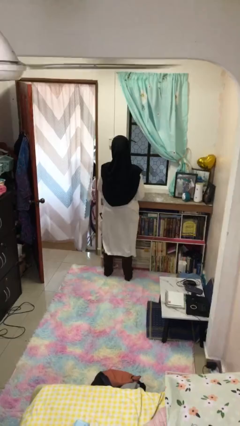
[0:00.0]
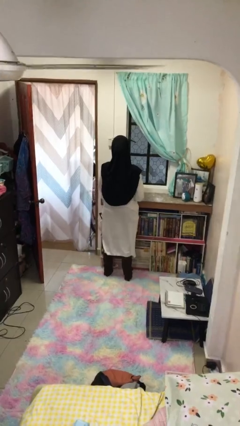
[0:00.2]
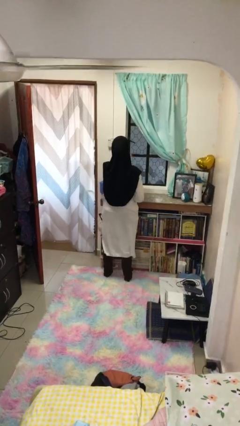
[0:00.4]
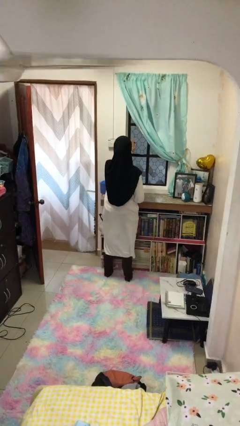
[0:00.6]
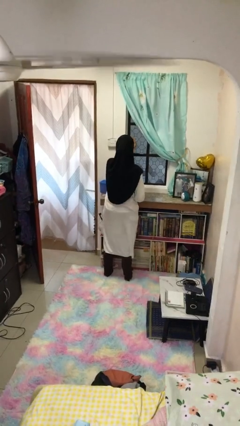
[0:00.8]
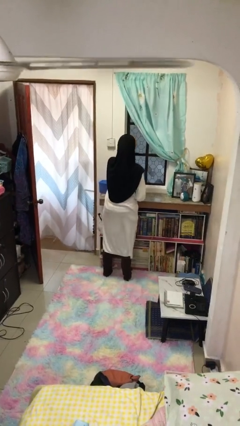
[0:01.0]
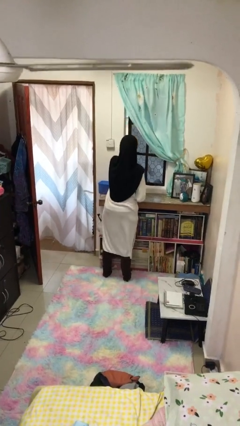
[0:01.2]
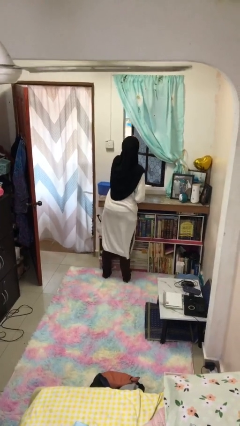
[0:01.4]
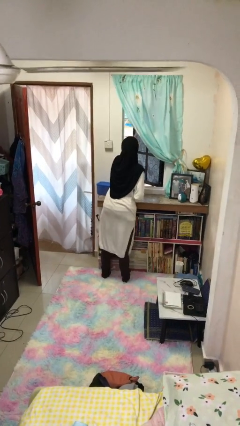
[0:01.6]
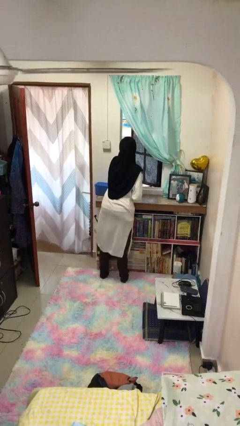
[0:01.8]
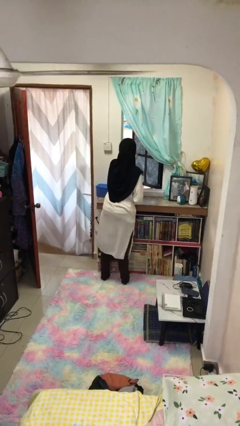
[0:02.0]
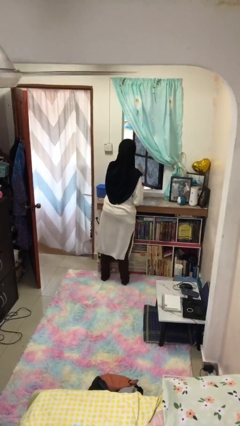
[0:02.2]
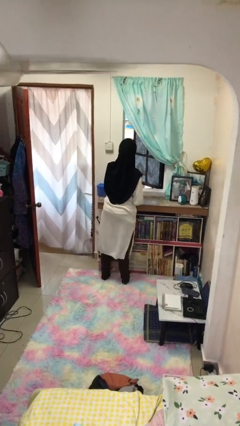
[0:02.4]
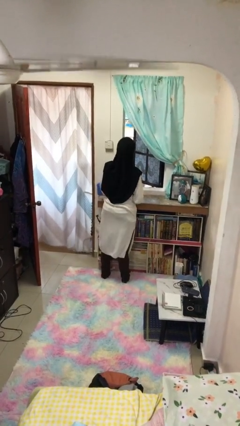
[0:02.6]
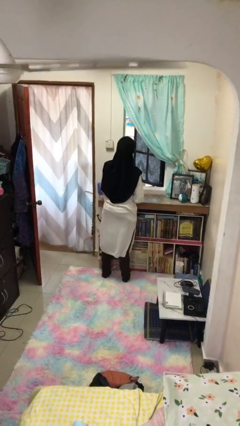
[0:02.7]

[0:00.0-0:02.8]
person opens home window

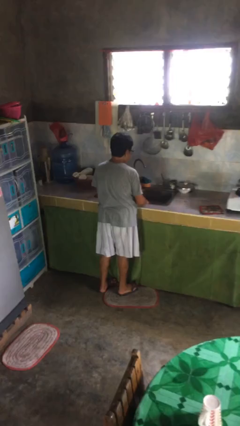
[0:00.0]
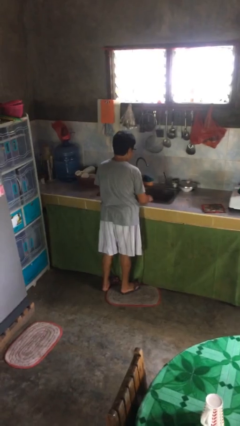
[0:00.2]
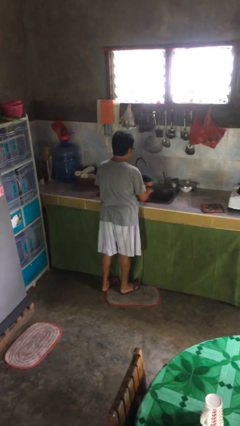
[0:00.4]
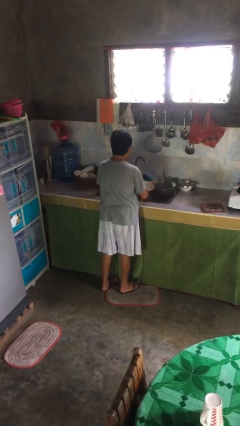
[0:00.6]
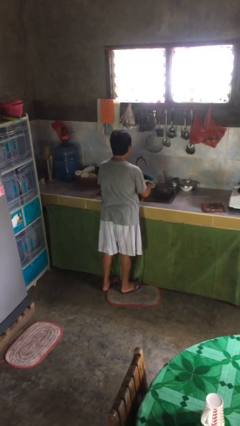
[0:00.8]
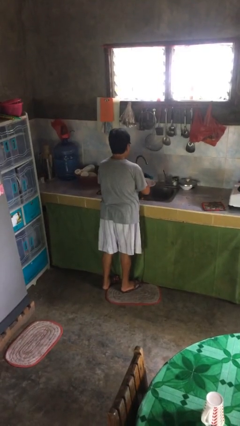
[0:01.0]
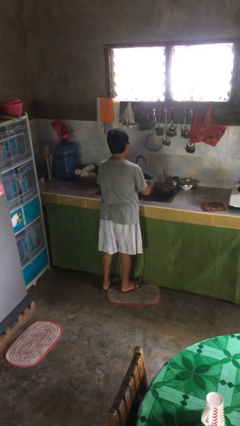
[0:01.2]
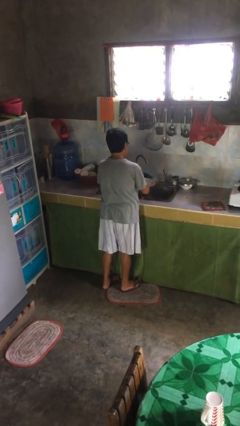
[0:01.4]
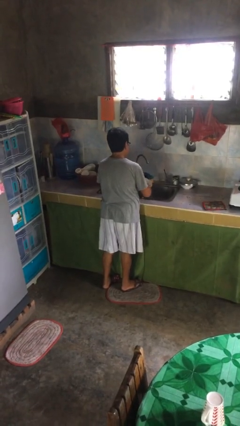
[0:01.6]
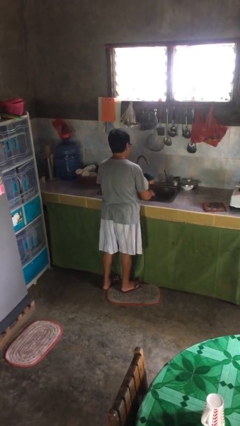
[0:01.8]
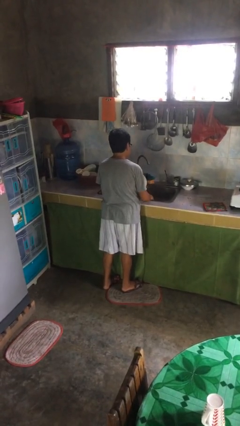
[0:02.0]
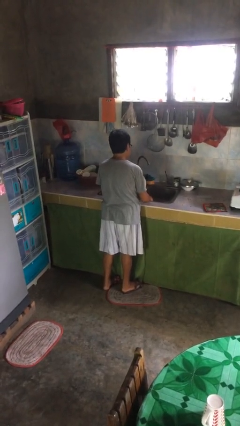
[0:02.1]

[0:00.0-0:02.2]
person washes dish

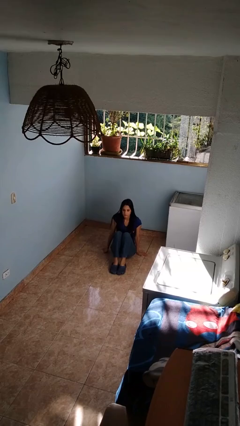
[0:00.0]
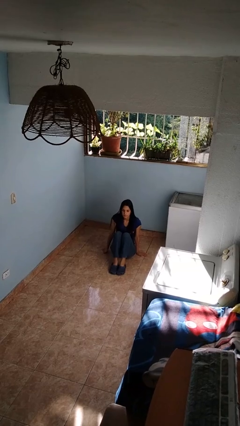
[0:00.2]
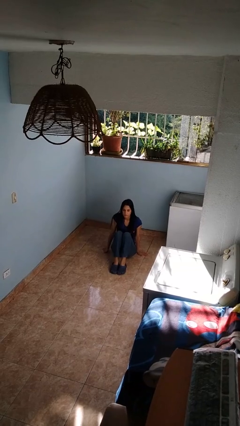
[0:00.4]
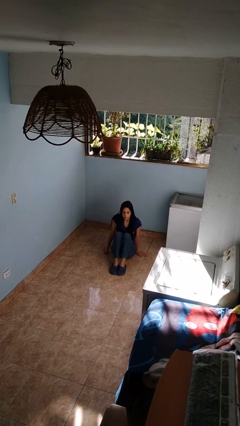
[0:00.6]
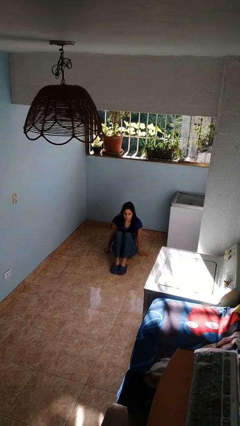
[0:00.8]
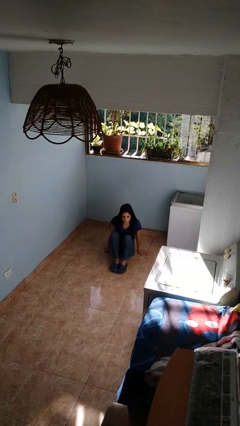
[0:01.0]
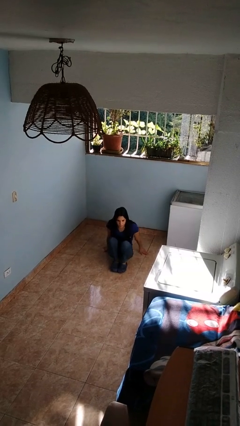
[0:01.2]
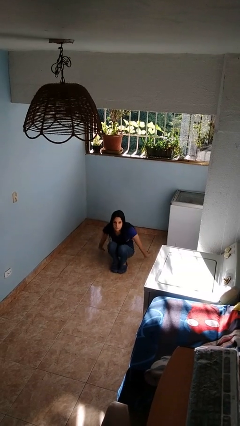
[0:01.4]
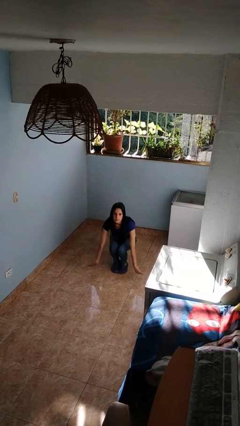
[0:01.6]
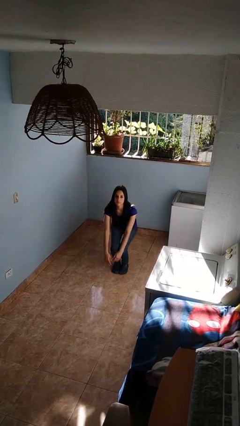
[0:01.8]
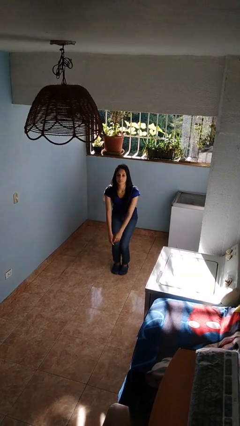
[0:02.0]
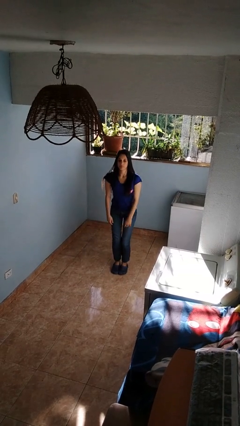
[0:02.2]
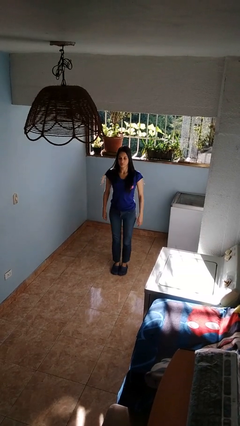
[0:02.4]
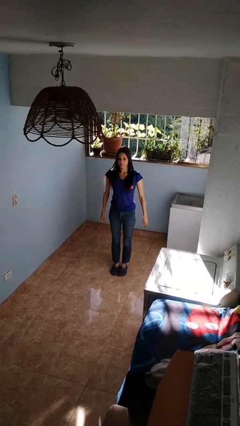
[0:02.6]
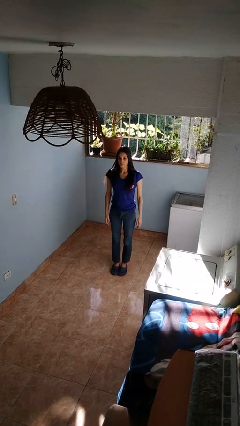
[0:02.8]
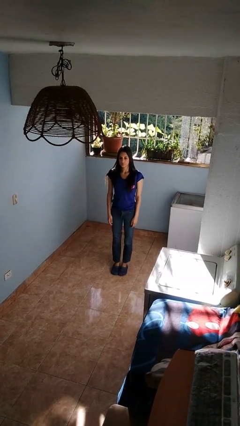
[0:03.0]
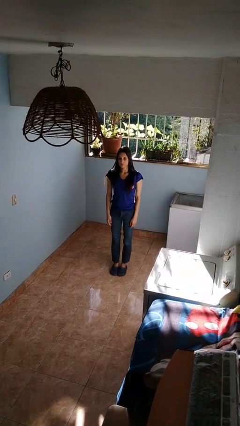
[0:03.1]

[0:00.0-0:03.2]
person stands up from floor

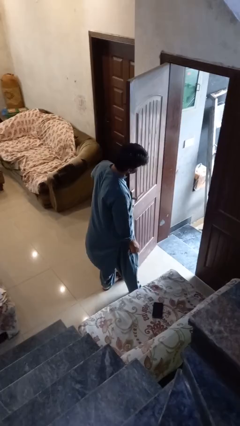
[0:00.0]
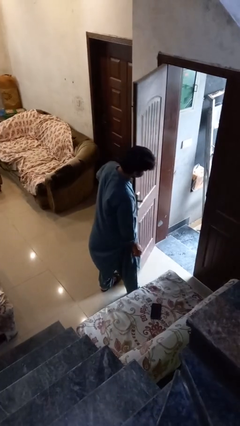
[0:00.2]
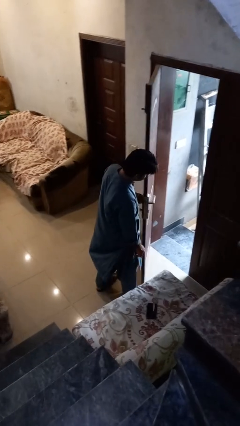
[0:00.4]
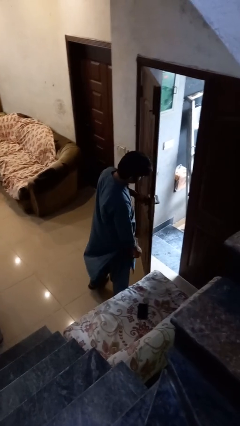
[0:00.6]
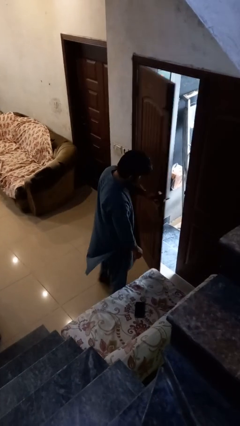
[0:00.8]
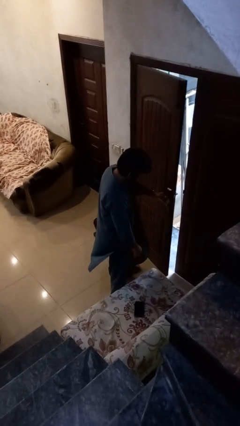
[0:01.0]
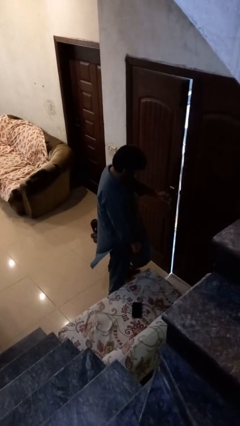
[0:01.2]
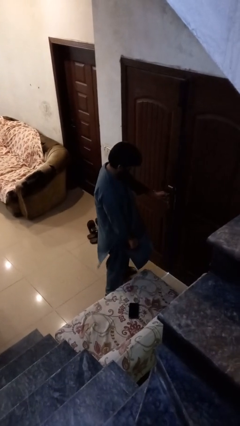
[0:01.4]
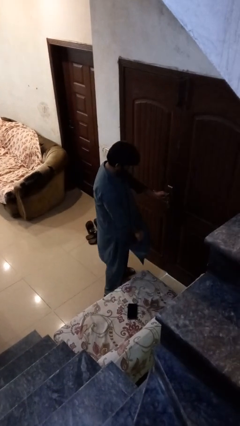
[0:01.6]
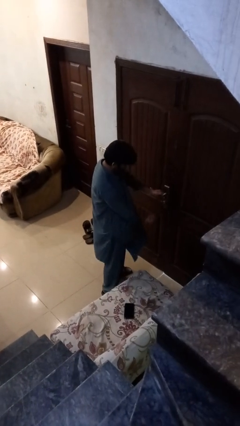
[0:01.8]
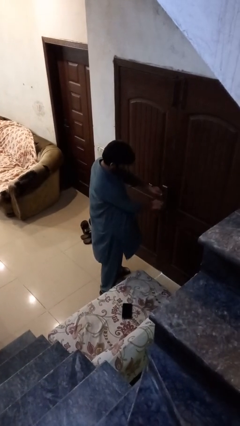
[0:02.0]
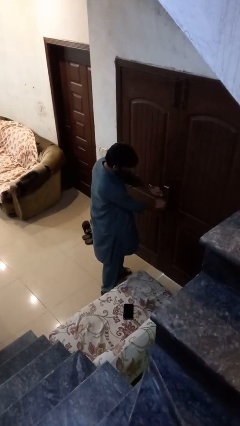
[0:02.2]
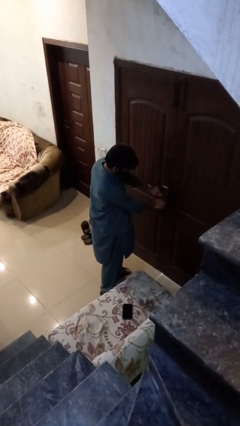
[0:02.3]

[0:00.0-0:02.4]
person closes facility door

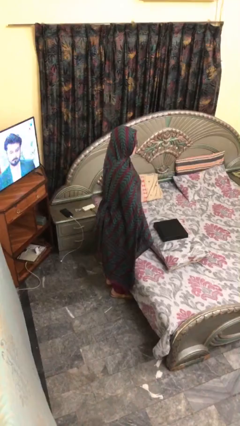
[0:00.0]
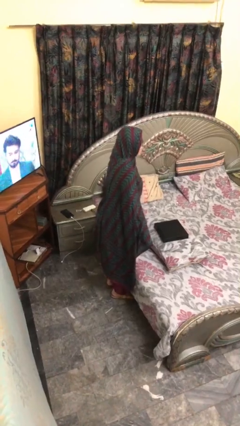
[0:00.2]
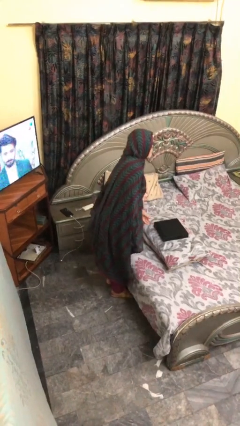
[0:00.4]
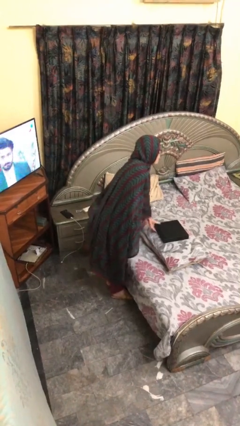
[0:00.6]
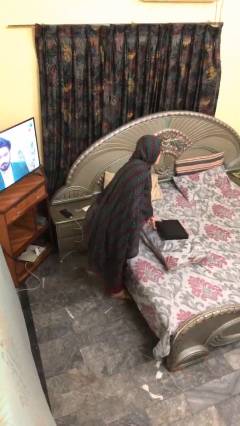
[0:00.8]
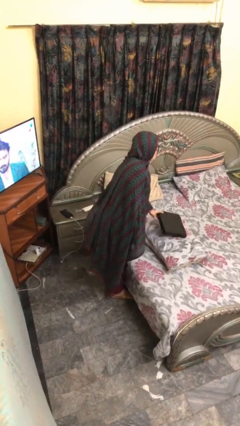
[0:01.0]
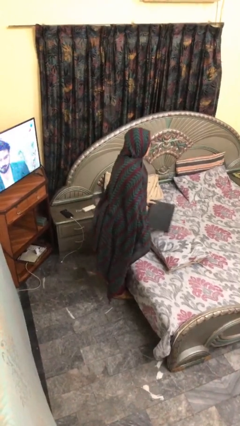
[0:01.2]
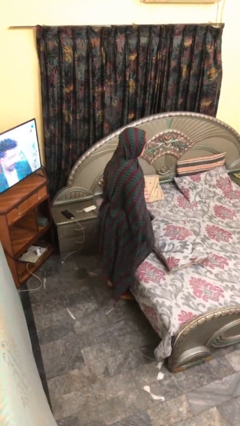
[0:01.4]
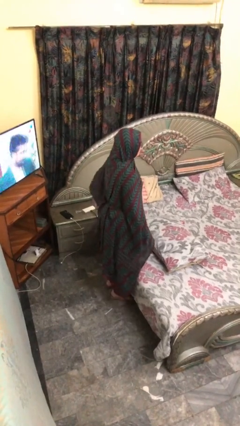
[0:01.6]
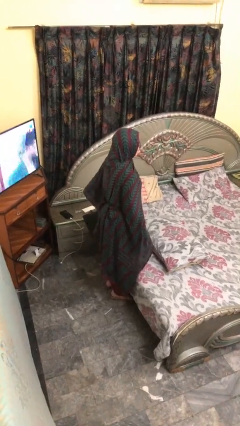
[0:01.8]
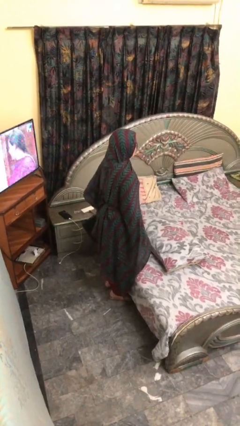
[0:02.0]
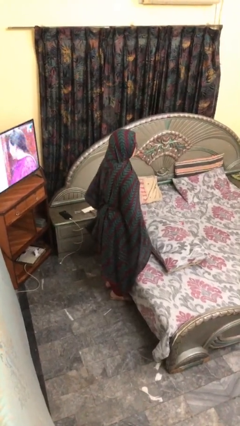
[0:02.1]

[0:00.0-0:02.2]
person picks up object from bed

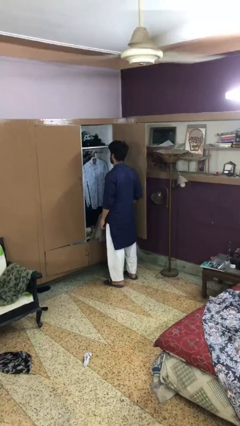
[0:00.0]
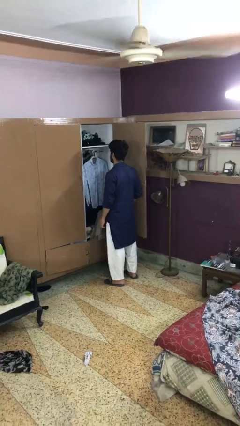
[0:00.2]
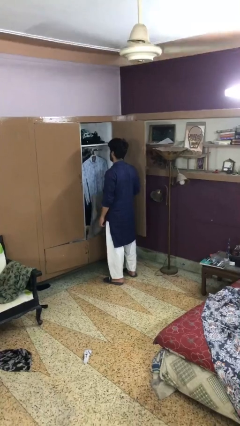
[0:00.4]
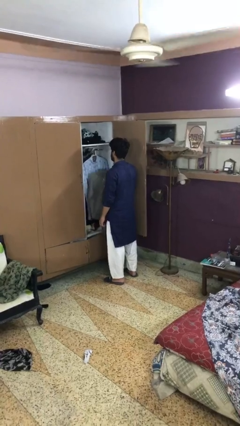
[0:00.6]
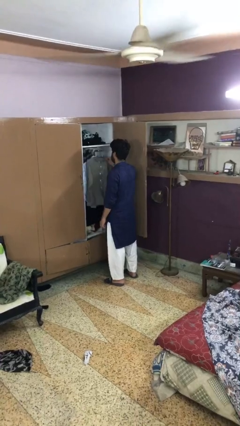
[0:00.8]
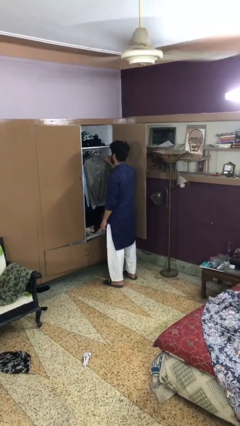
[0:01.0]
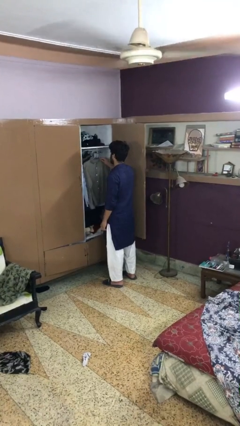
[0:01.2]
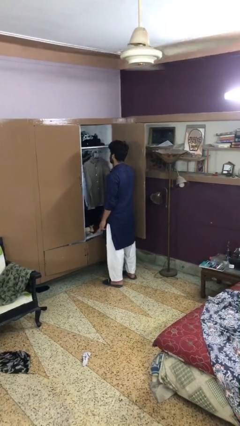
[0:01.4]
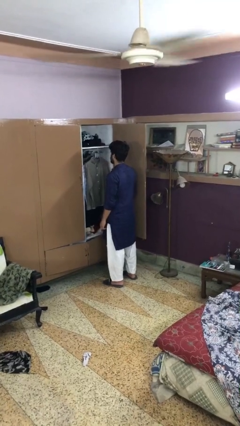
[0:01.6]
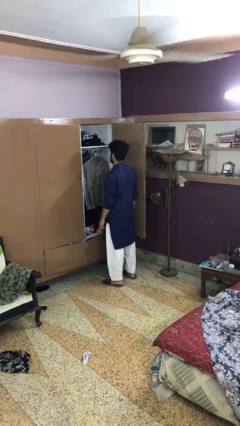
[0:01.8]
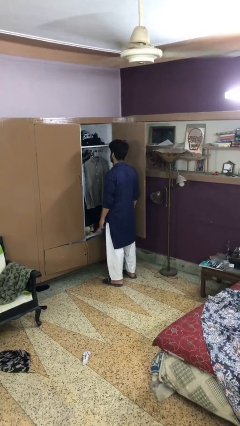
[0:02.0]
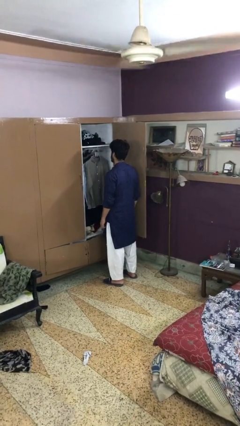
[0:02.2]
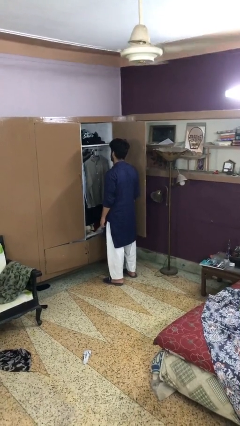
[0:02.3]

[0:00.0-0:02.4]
person puts clothes into closet

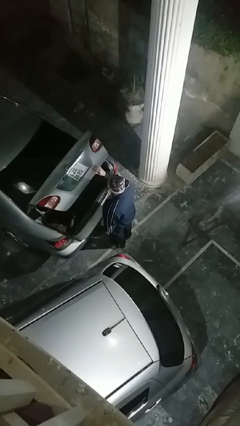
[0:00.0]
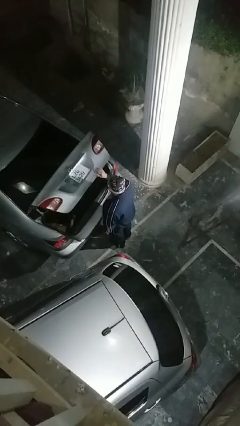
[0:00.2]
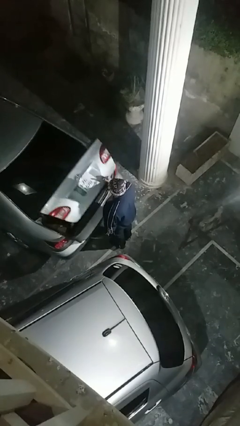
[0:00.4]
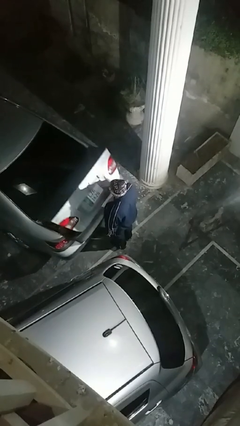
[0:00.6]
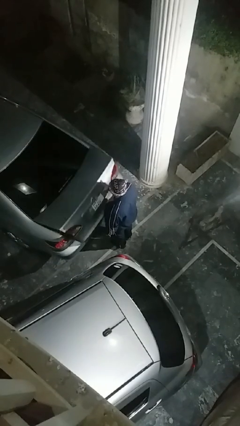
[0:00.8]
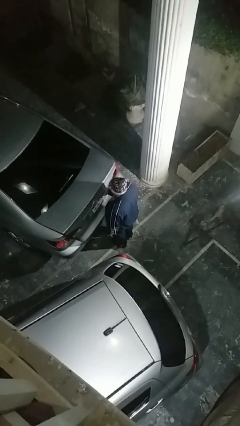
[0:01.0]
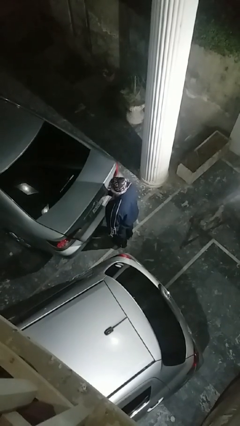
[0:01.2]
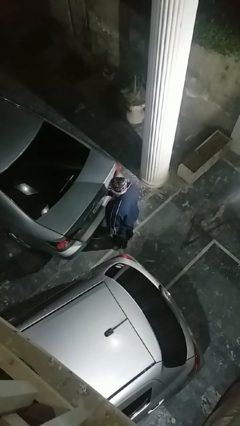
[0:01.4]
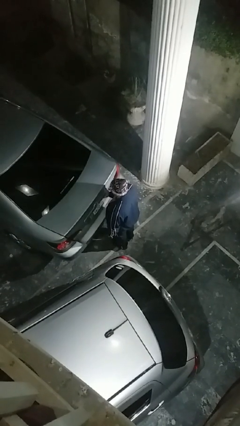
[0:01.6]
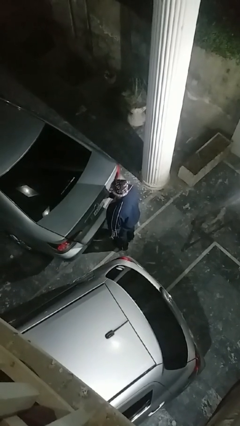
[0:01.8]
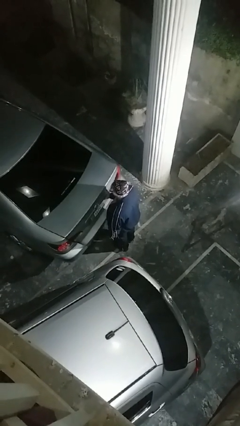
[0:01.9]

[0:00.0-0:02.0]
person closes car trunk
